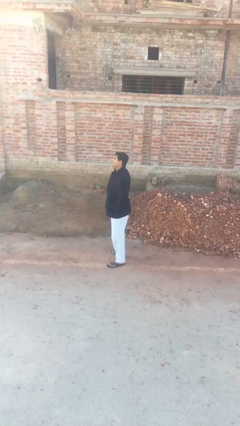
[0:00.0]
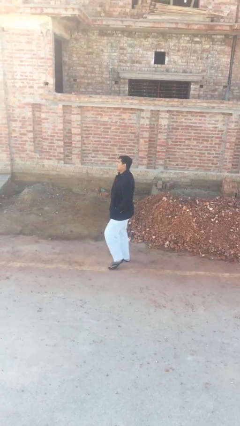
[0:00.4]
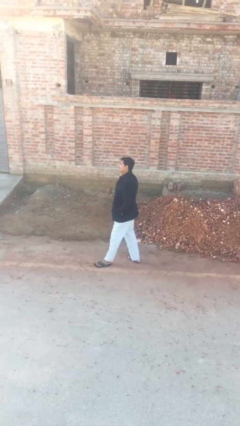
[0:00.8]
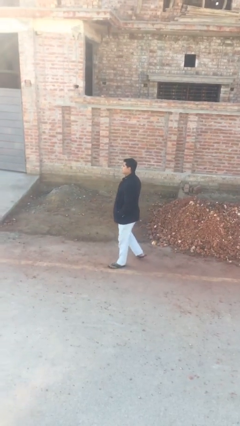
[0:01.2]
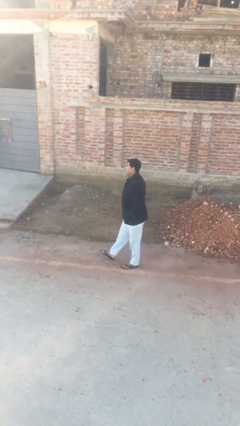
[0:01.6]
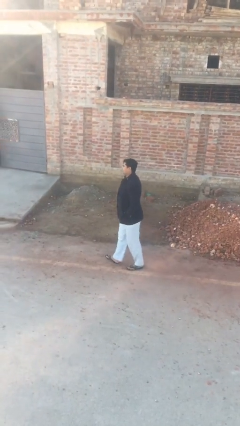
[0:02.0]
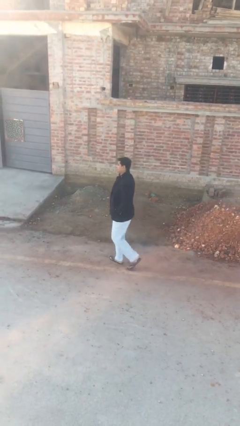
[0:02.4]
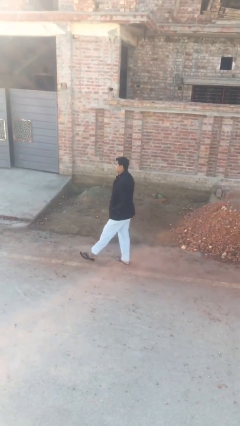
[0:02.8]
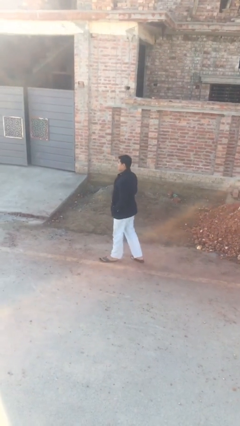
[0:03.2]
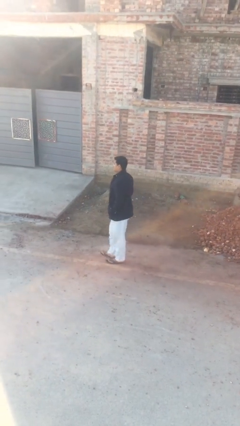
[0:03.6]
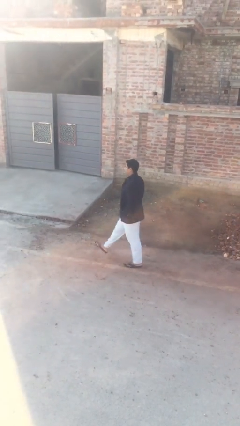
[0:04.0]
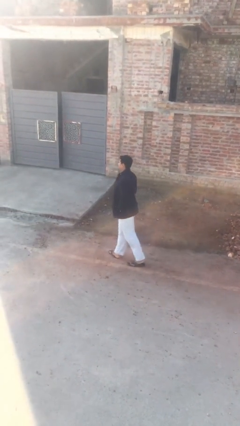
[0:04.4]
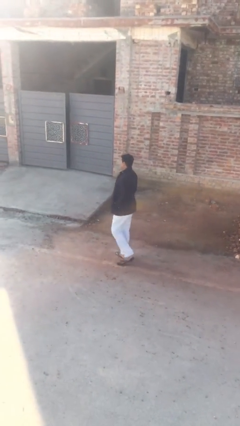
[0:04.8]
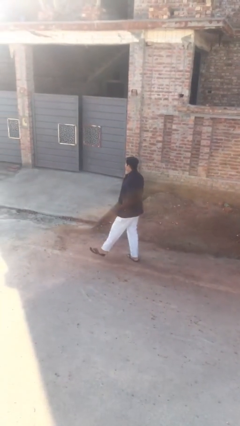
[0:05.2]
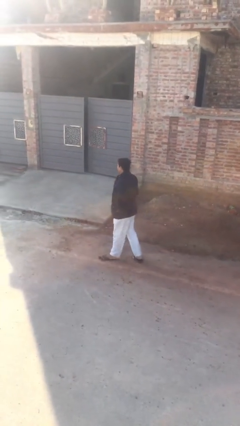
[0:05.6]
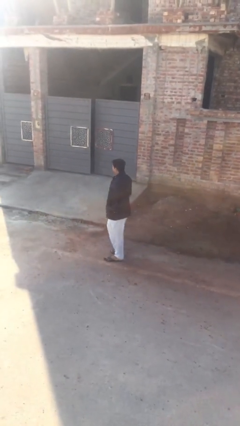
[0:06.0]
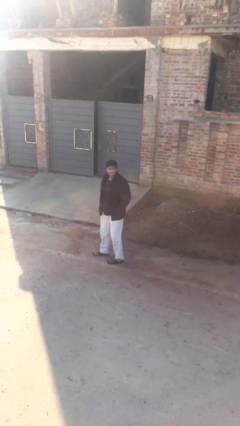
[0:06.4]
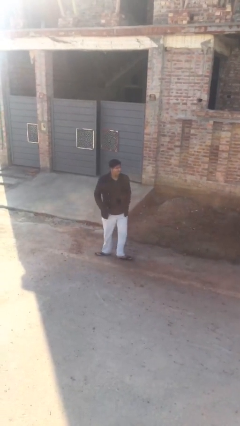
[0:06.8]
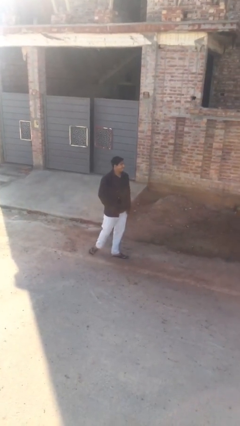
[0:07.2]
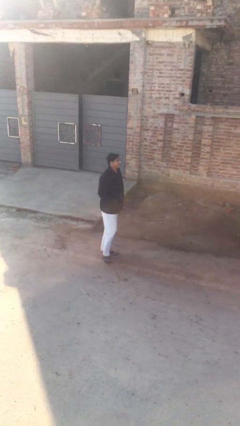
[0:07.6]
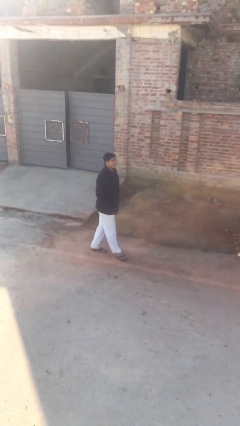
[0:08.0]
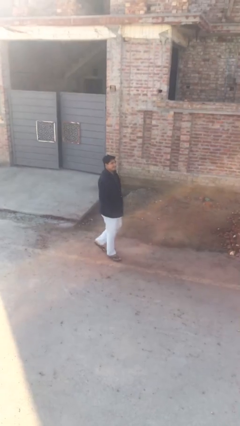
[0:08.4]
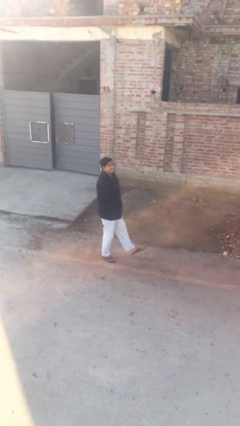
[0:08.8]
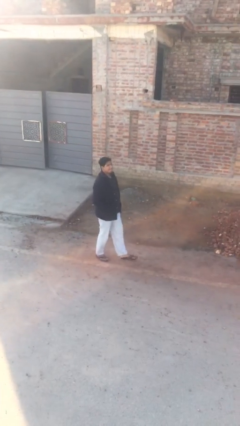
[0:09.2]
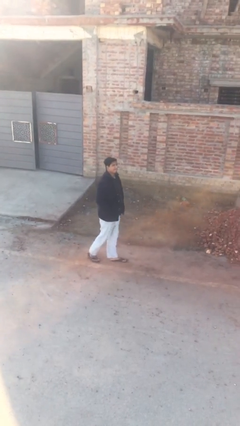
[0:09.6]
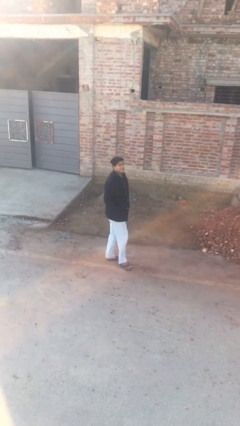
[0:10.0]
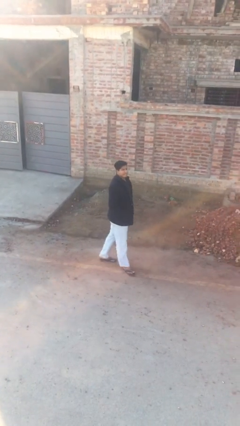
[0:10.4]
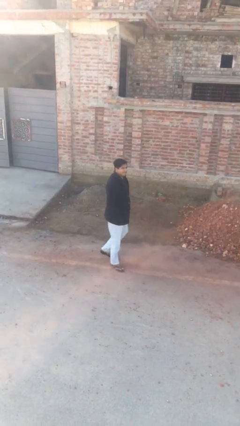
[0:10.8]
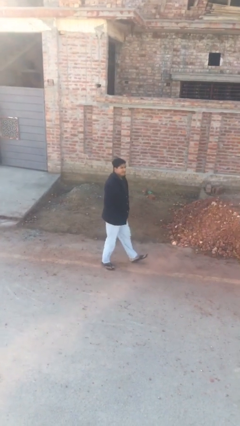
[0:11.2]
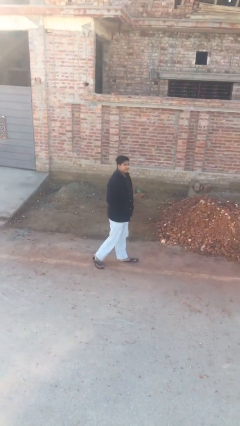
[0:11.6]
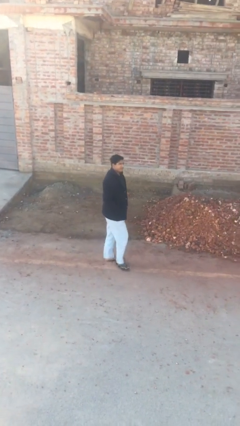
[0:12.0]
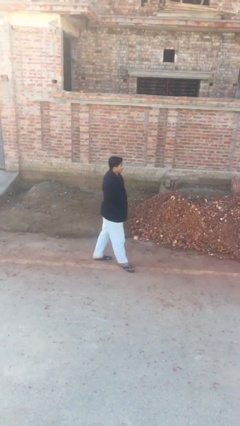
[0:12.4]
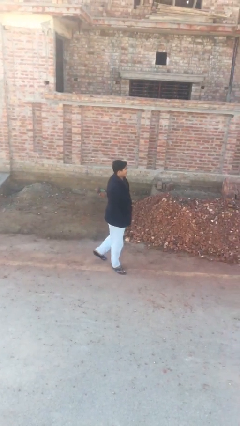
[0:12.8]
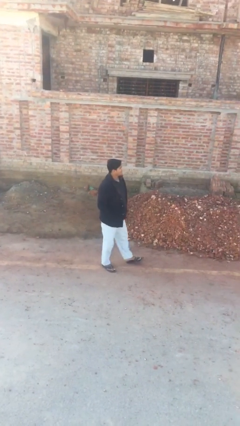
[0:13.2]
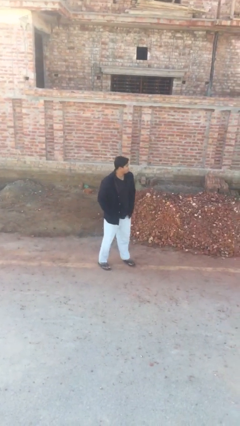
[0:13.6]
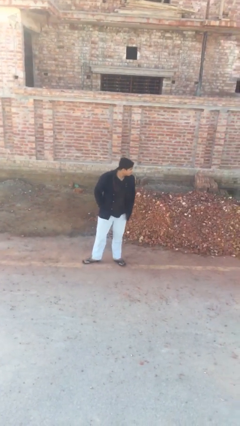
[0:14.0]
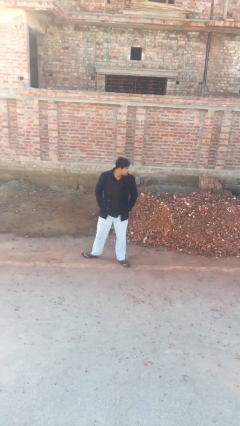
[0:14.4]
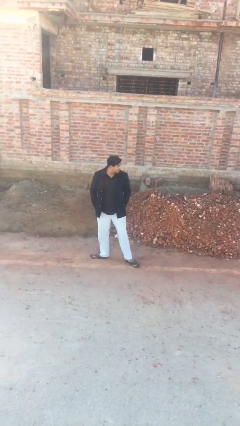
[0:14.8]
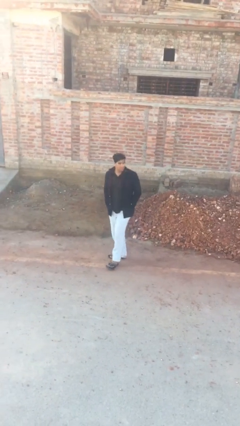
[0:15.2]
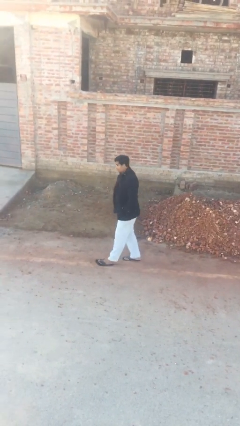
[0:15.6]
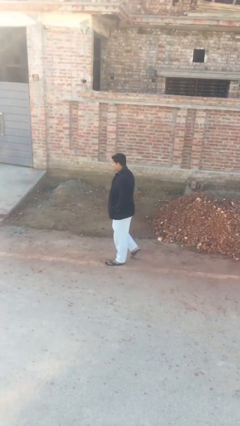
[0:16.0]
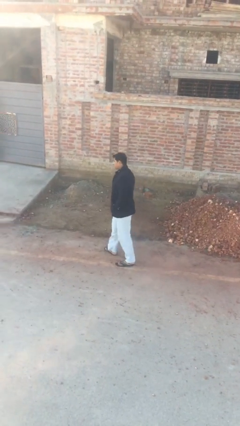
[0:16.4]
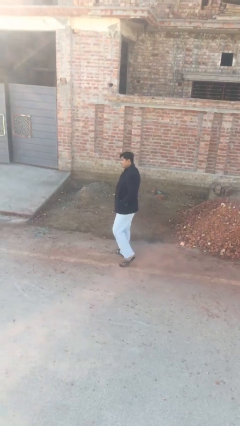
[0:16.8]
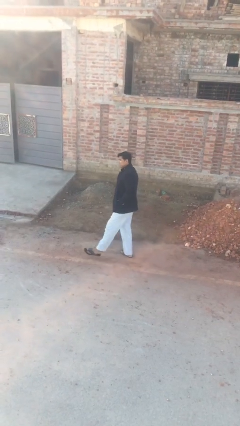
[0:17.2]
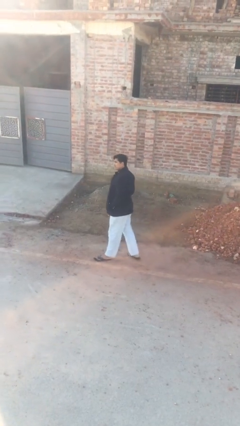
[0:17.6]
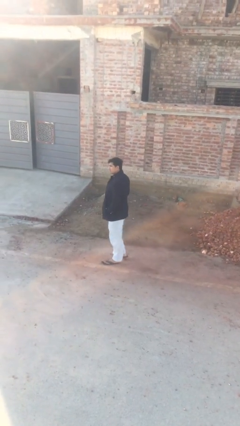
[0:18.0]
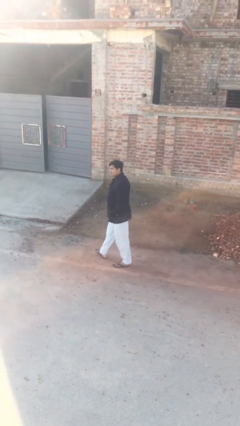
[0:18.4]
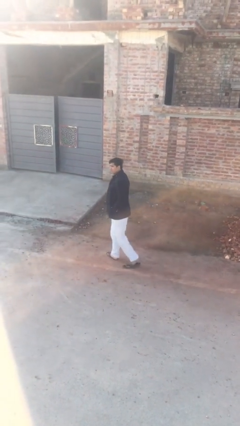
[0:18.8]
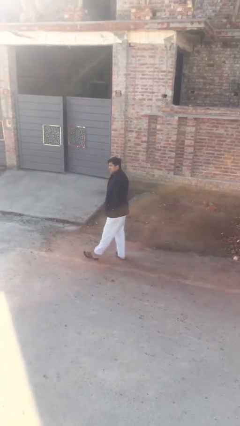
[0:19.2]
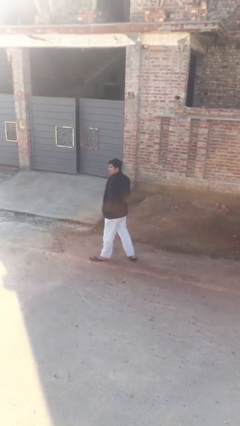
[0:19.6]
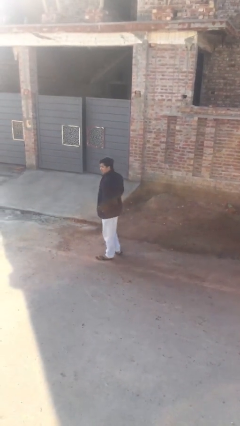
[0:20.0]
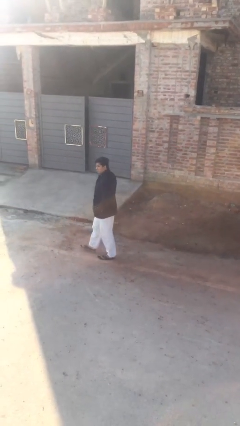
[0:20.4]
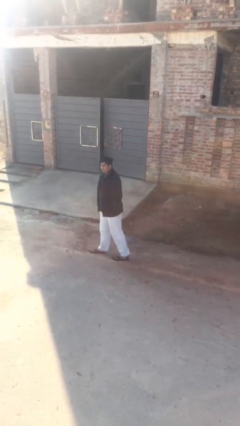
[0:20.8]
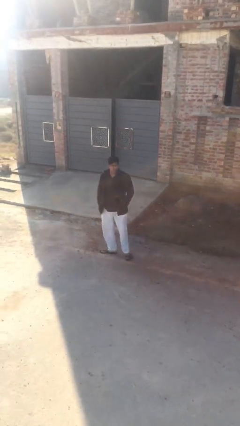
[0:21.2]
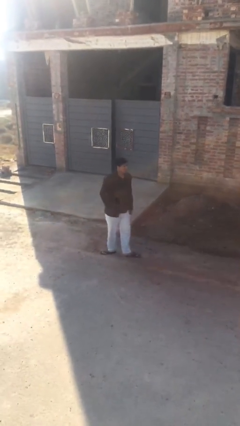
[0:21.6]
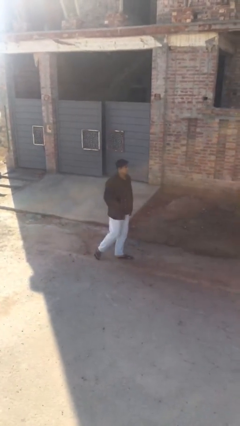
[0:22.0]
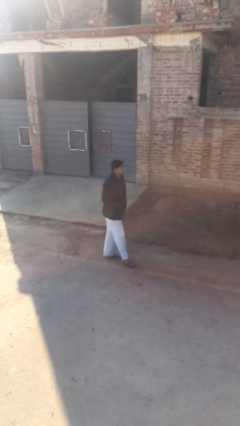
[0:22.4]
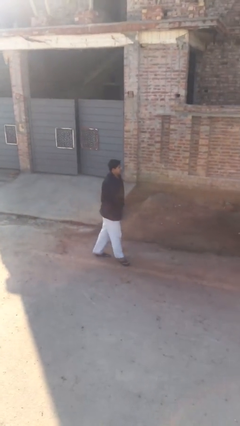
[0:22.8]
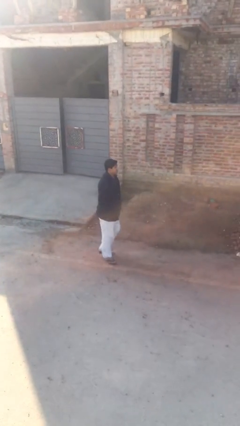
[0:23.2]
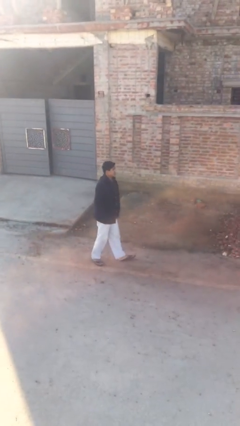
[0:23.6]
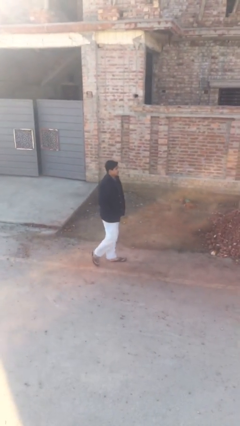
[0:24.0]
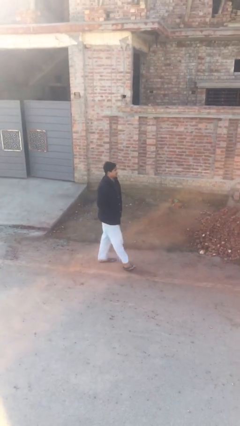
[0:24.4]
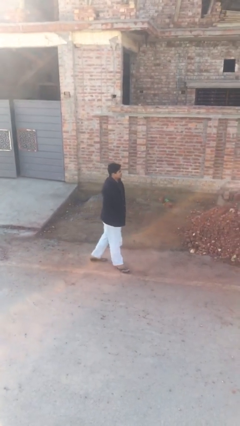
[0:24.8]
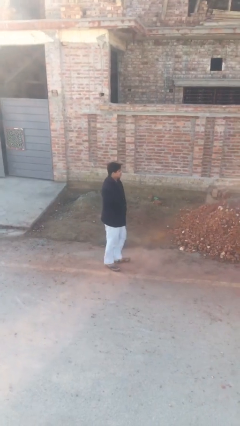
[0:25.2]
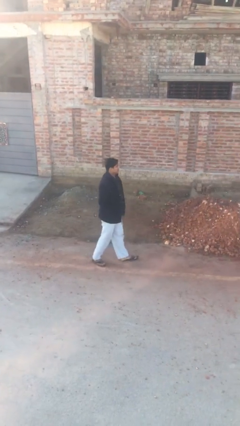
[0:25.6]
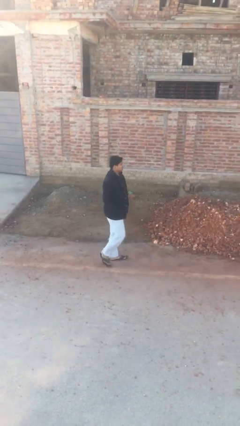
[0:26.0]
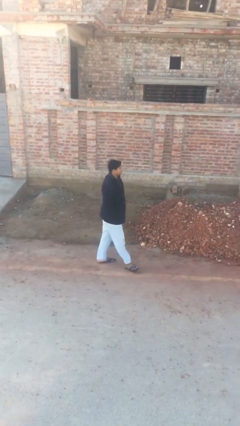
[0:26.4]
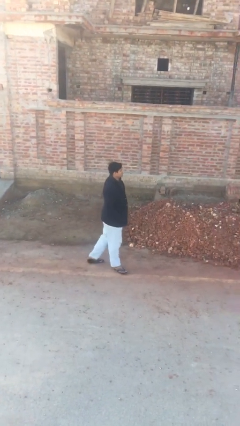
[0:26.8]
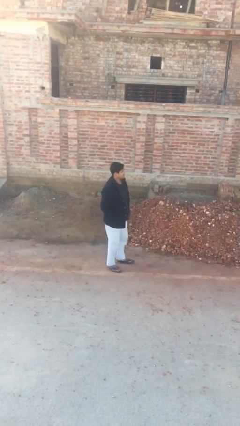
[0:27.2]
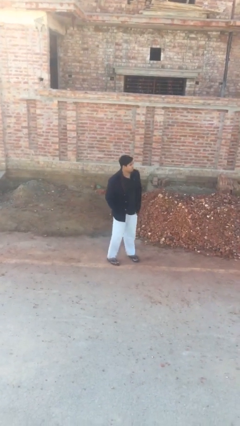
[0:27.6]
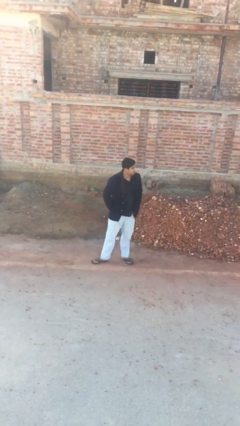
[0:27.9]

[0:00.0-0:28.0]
person walks

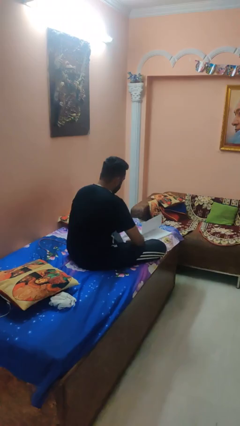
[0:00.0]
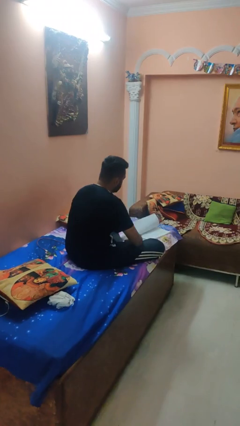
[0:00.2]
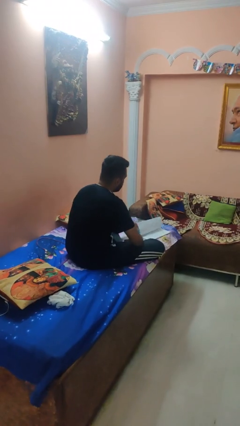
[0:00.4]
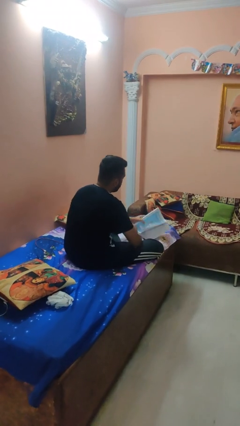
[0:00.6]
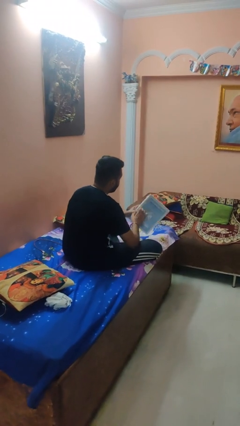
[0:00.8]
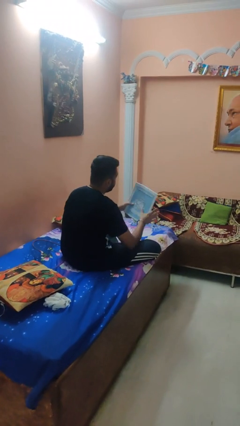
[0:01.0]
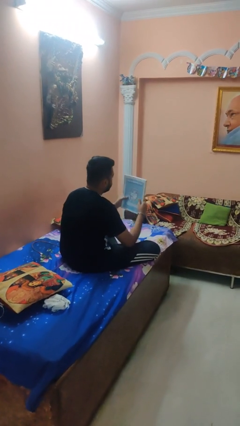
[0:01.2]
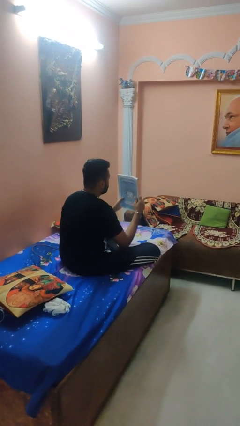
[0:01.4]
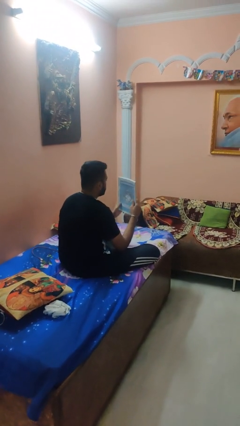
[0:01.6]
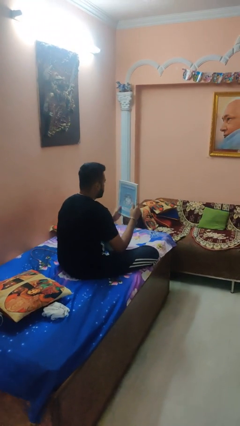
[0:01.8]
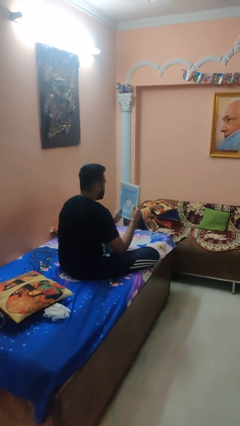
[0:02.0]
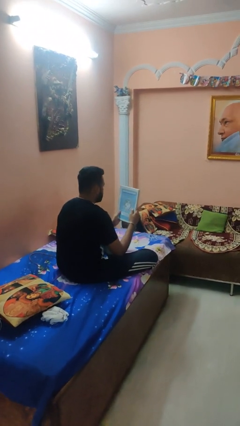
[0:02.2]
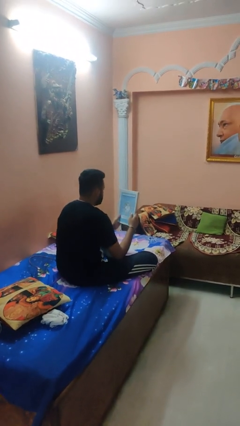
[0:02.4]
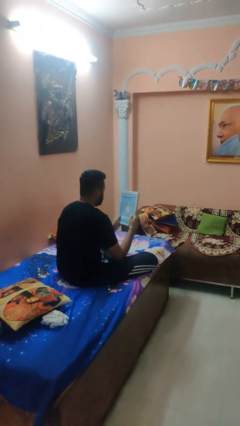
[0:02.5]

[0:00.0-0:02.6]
person picks up object from bed

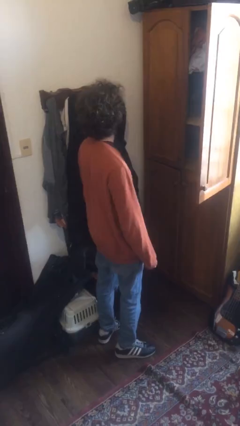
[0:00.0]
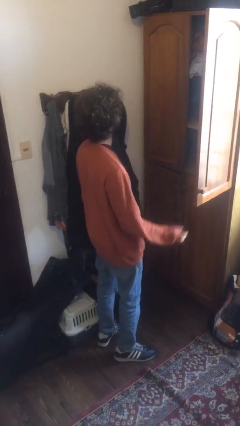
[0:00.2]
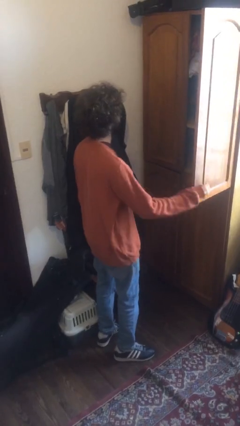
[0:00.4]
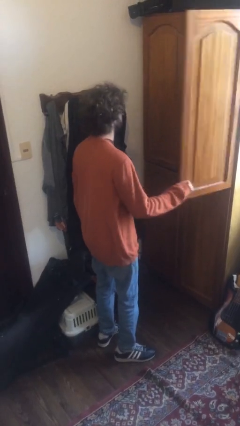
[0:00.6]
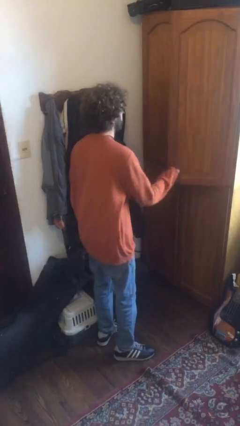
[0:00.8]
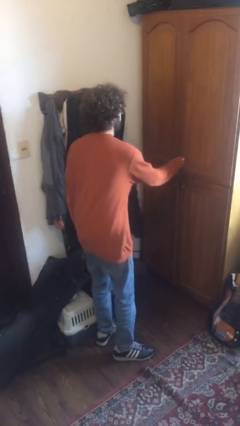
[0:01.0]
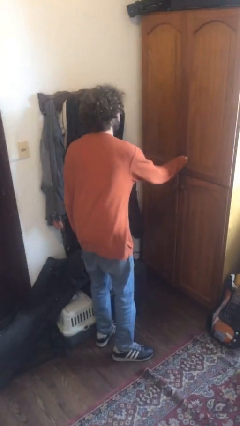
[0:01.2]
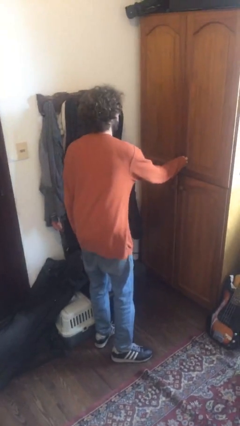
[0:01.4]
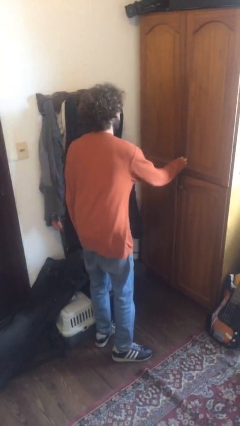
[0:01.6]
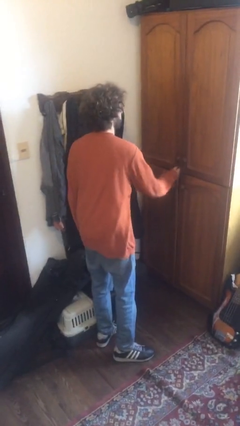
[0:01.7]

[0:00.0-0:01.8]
person closes dresser drawer
